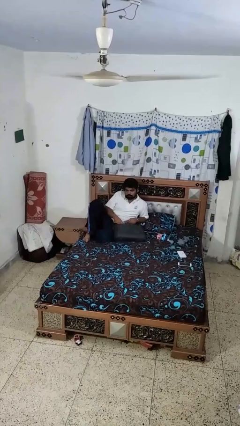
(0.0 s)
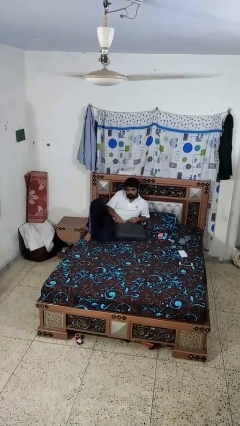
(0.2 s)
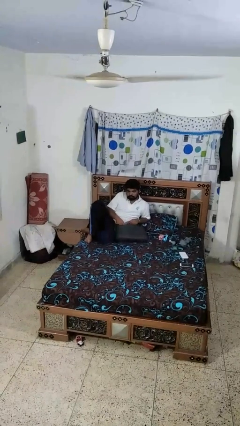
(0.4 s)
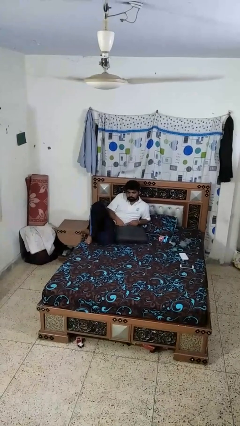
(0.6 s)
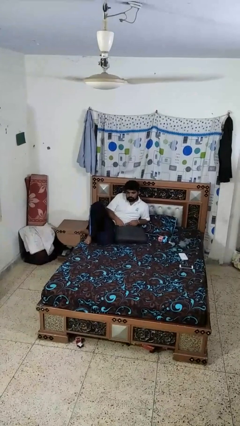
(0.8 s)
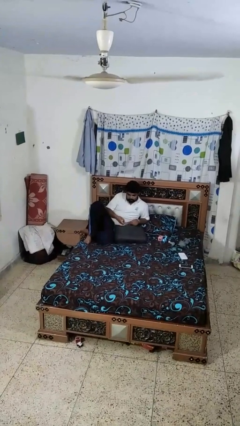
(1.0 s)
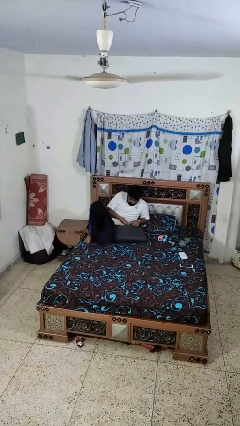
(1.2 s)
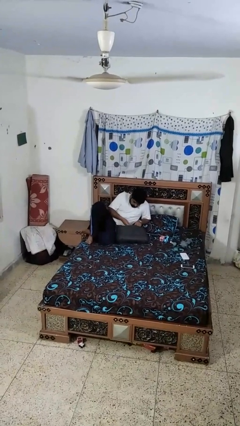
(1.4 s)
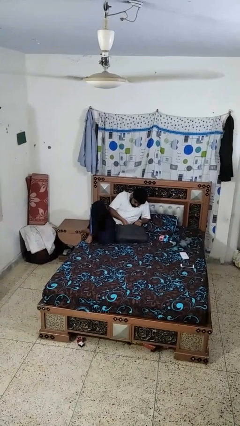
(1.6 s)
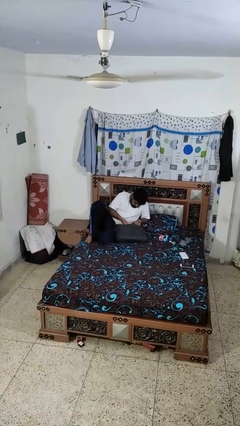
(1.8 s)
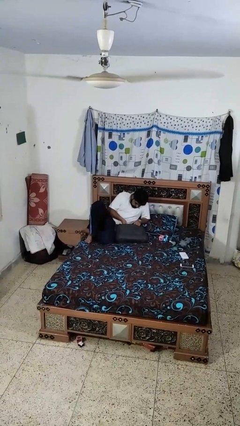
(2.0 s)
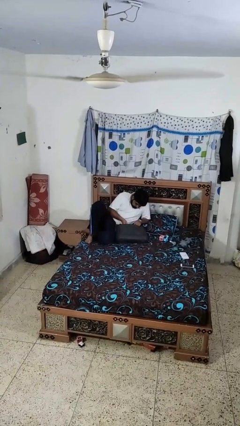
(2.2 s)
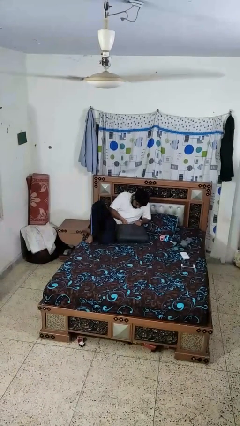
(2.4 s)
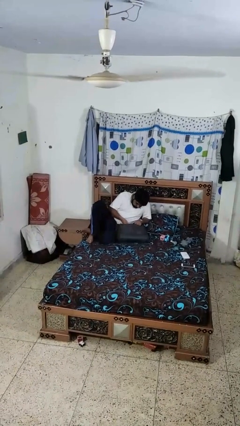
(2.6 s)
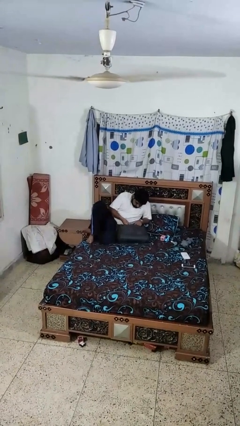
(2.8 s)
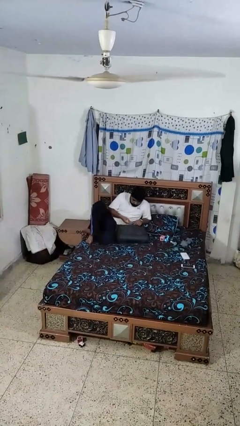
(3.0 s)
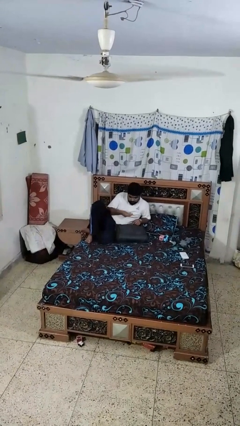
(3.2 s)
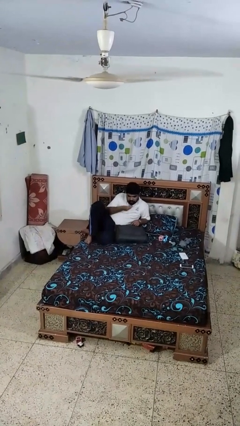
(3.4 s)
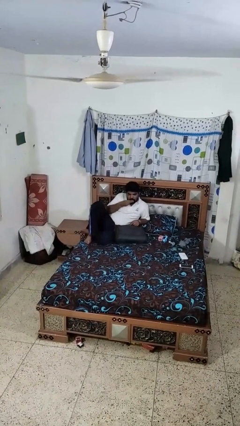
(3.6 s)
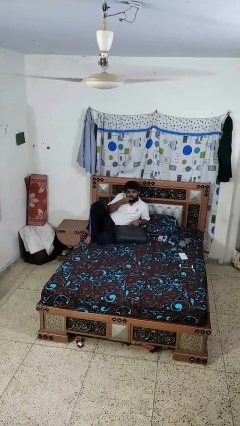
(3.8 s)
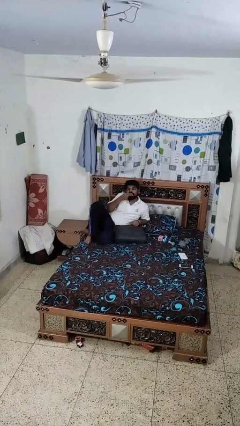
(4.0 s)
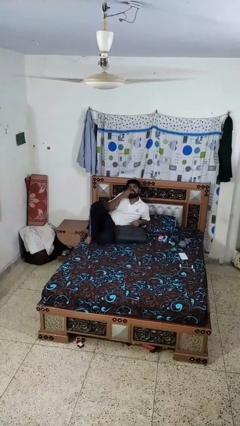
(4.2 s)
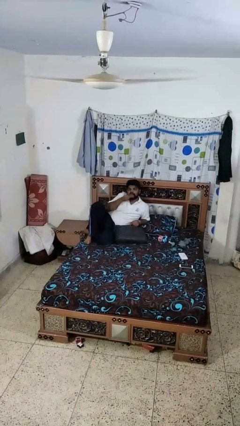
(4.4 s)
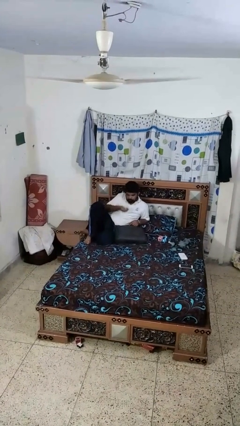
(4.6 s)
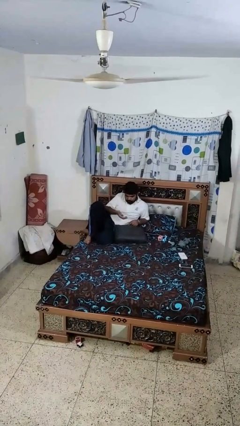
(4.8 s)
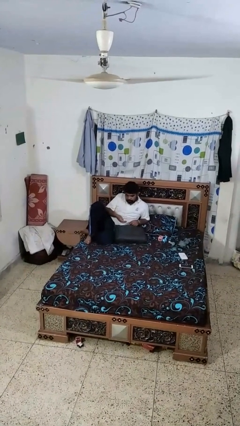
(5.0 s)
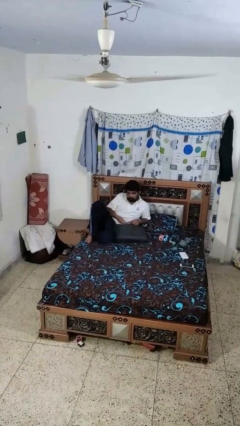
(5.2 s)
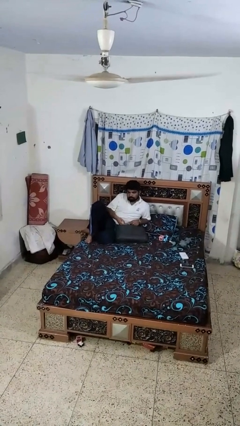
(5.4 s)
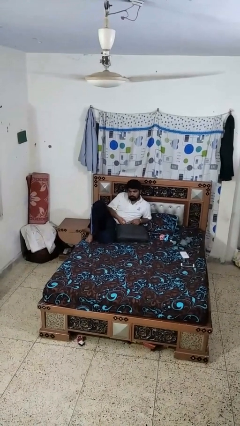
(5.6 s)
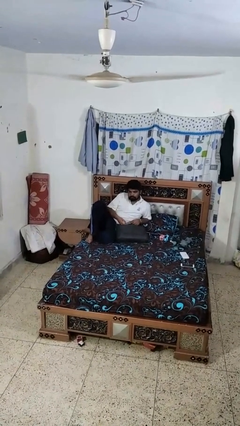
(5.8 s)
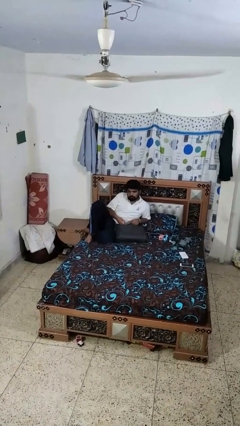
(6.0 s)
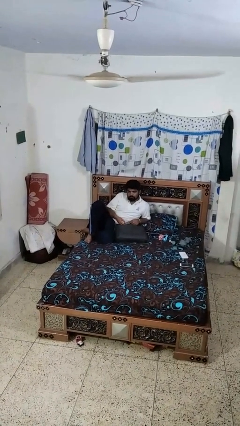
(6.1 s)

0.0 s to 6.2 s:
person eats snack from bag

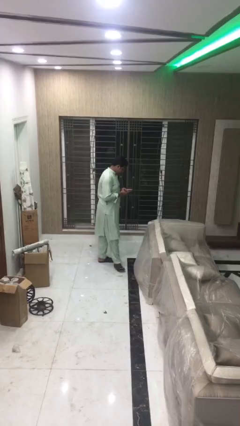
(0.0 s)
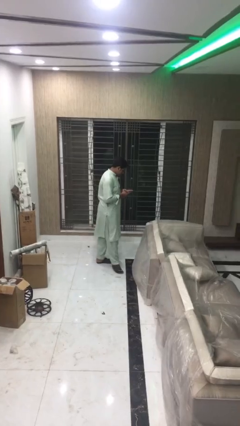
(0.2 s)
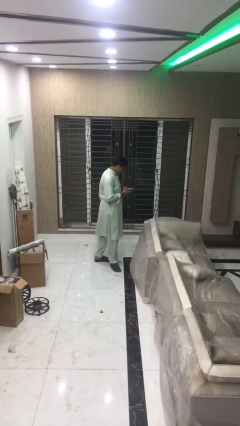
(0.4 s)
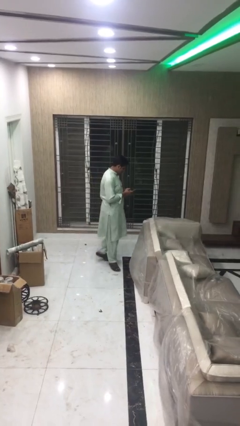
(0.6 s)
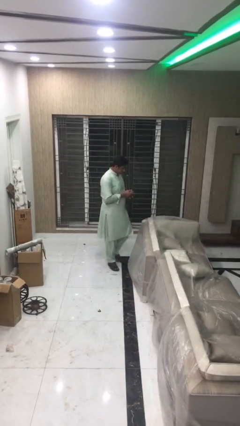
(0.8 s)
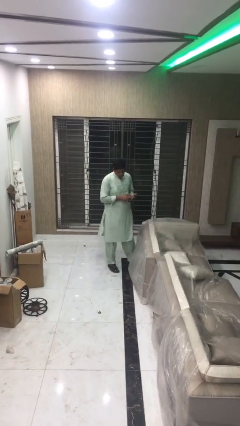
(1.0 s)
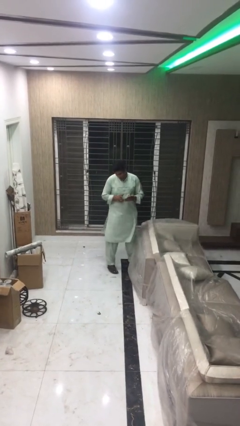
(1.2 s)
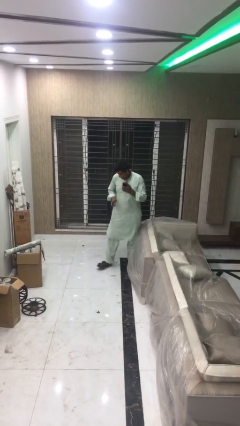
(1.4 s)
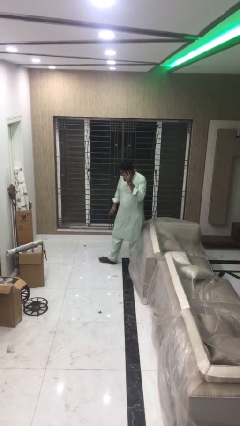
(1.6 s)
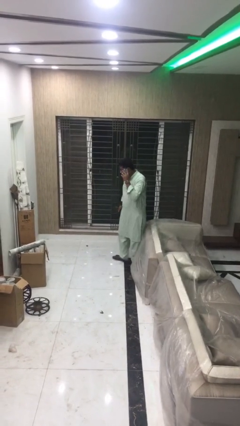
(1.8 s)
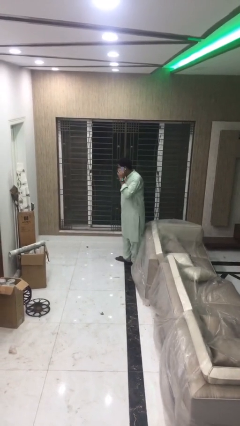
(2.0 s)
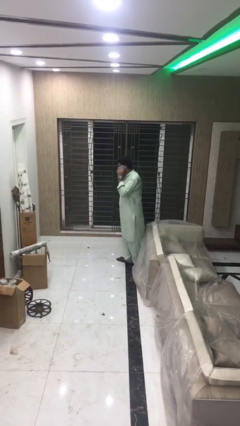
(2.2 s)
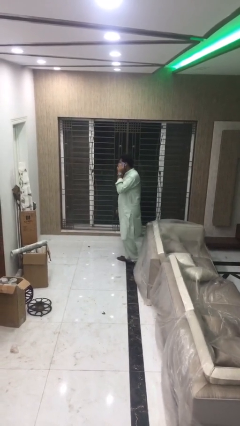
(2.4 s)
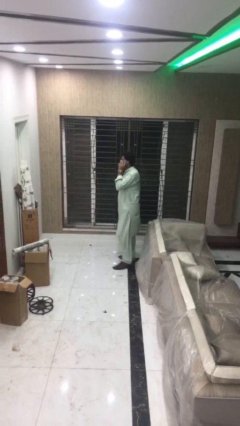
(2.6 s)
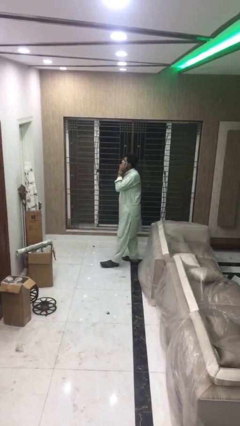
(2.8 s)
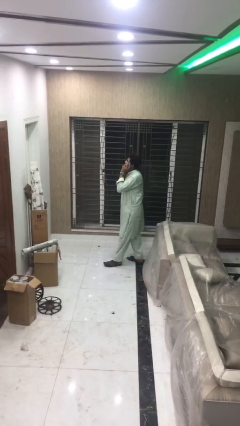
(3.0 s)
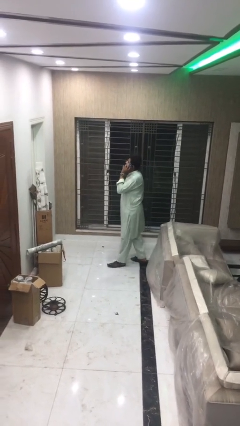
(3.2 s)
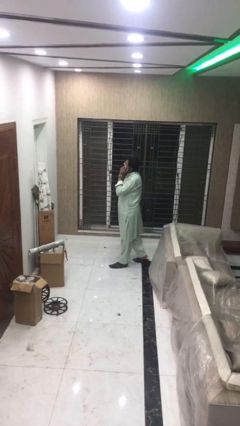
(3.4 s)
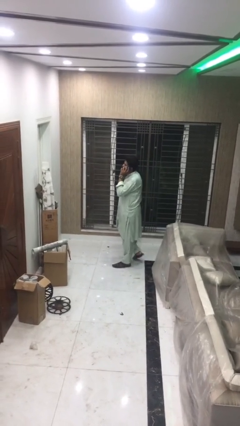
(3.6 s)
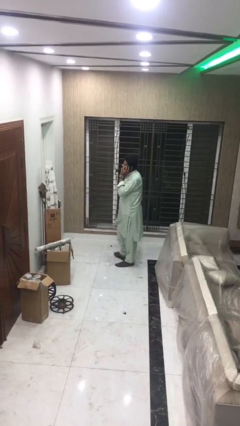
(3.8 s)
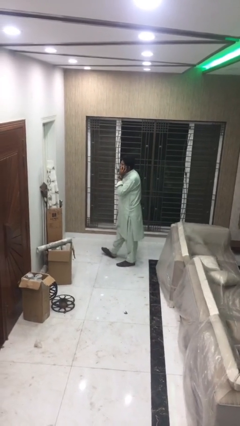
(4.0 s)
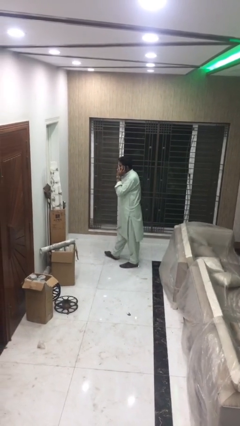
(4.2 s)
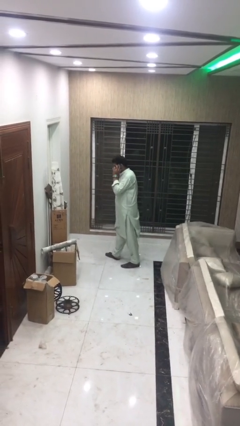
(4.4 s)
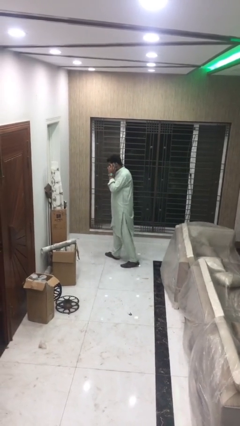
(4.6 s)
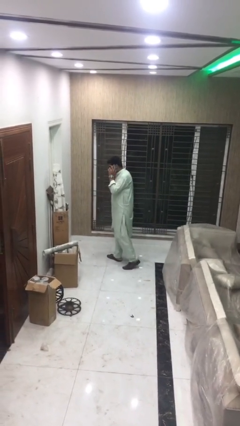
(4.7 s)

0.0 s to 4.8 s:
person talks on phone

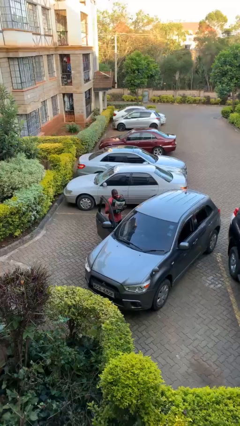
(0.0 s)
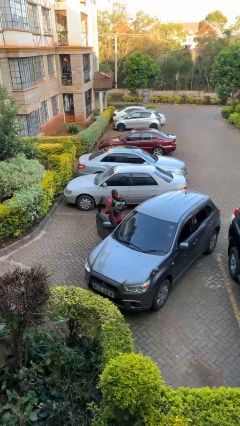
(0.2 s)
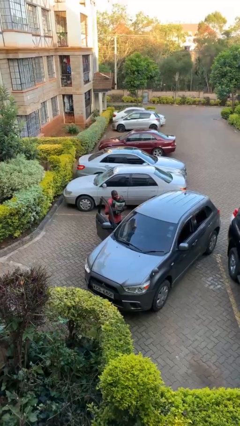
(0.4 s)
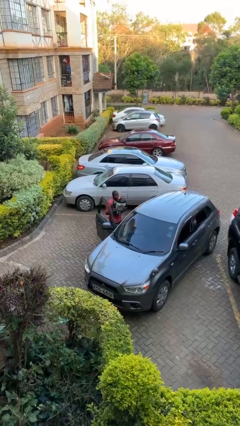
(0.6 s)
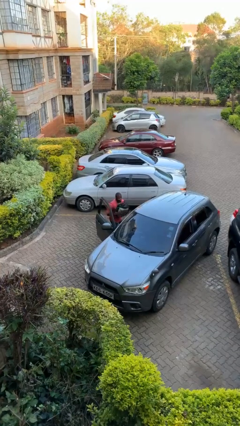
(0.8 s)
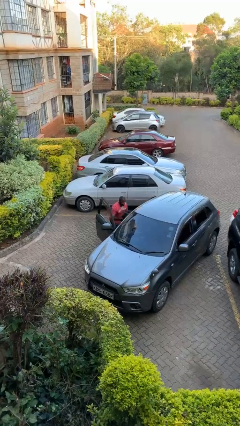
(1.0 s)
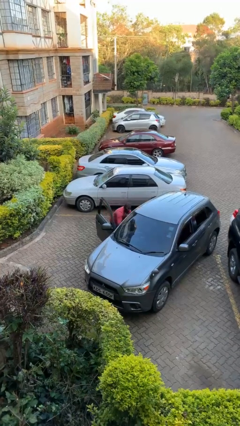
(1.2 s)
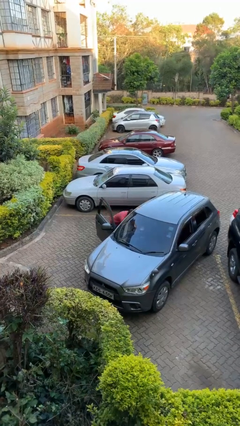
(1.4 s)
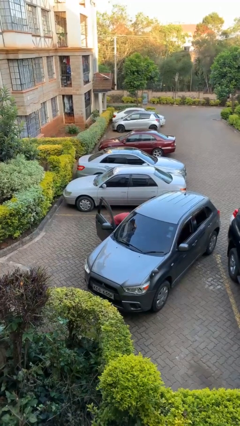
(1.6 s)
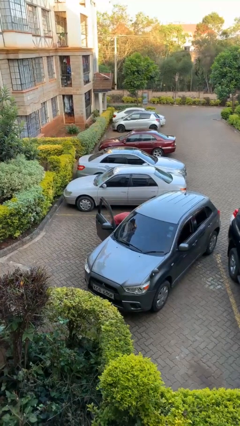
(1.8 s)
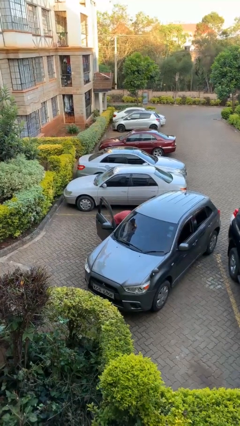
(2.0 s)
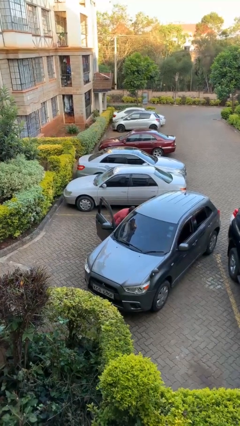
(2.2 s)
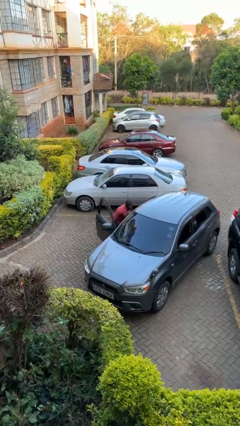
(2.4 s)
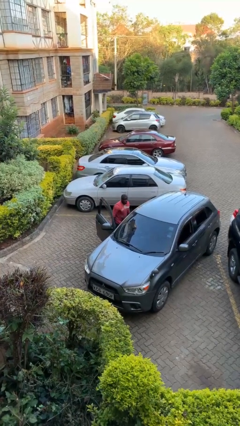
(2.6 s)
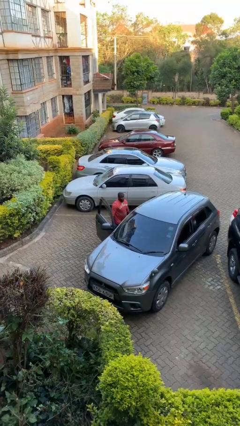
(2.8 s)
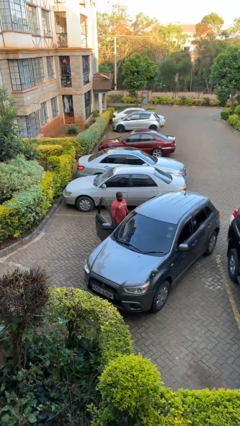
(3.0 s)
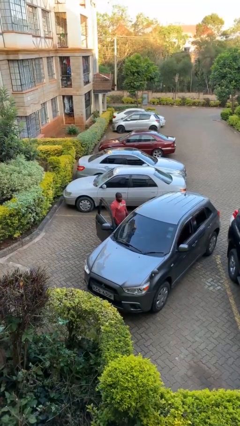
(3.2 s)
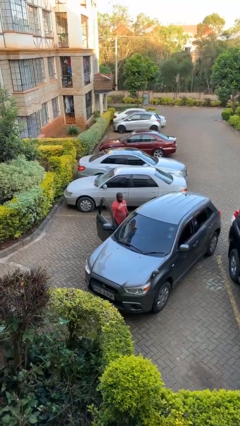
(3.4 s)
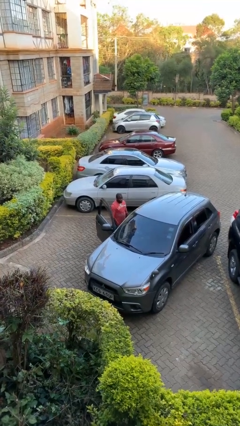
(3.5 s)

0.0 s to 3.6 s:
person loads car

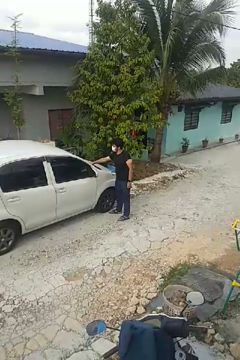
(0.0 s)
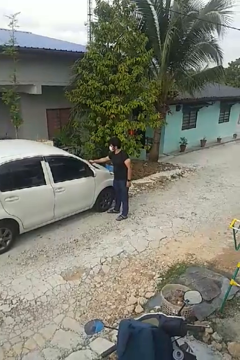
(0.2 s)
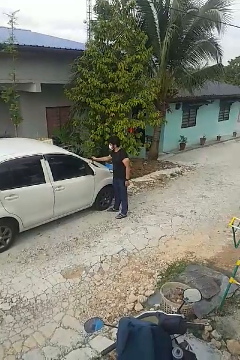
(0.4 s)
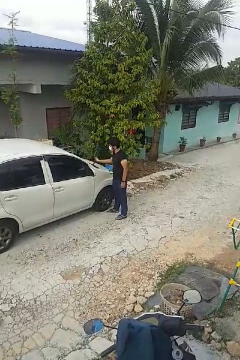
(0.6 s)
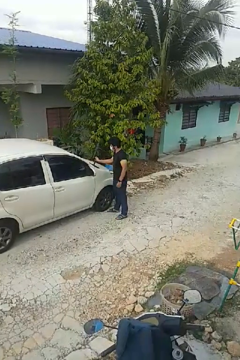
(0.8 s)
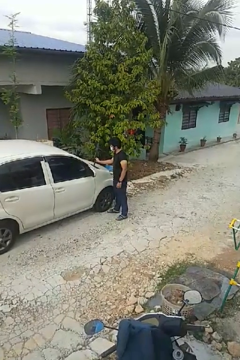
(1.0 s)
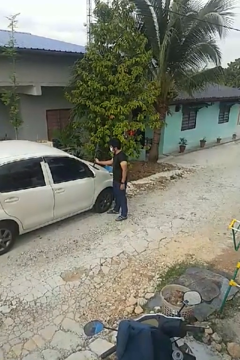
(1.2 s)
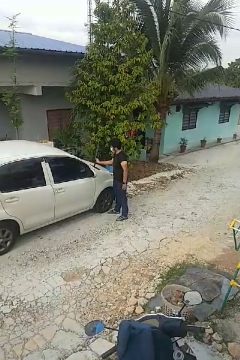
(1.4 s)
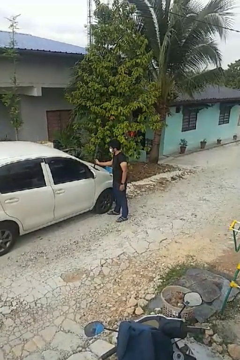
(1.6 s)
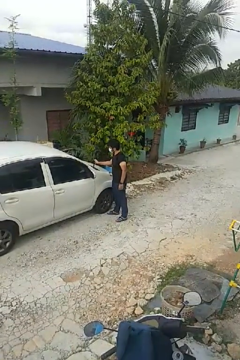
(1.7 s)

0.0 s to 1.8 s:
person flips up car wipers

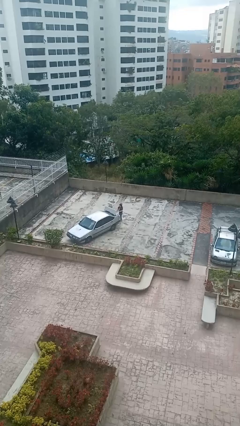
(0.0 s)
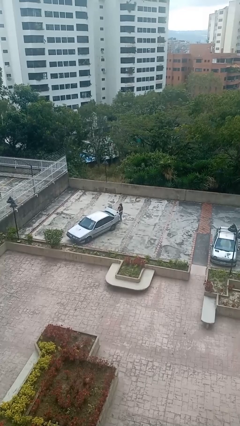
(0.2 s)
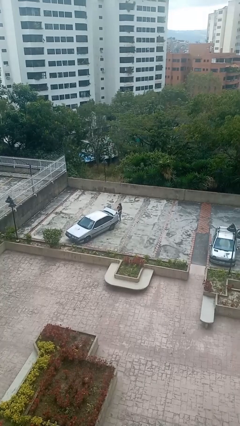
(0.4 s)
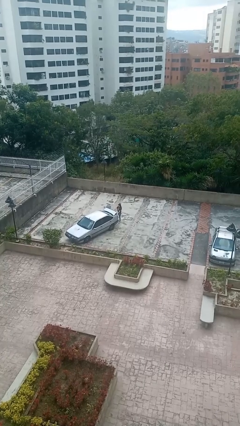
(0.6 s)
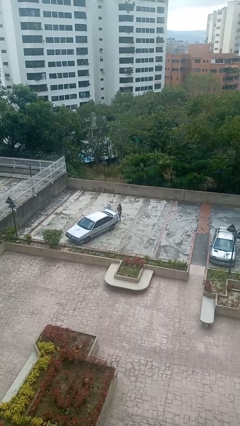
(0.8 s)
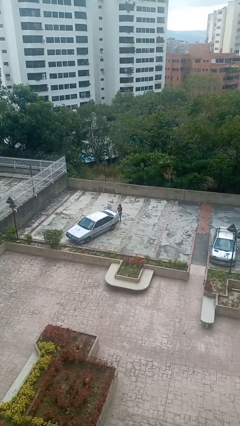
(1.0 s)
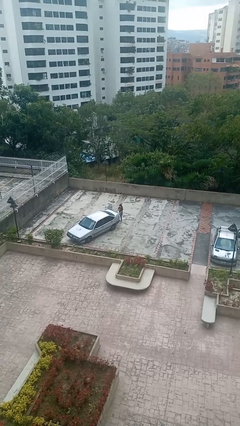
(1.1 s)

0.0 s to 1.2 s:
person closes car trunk

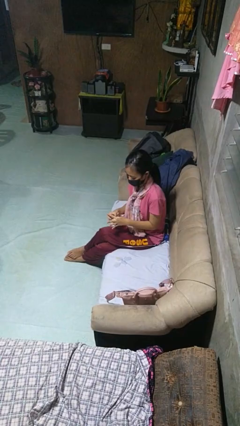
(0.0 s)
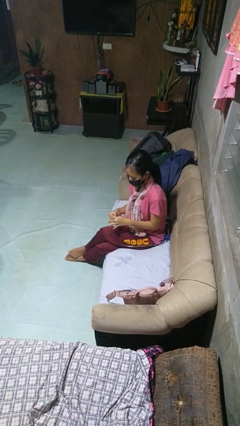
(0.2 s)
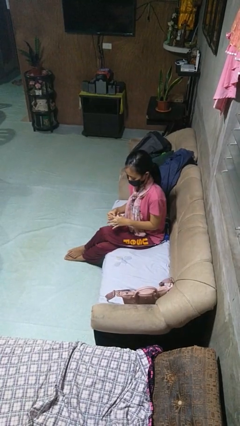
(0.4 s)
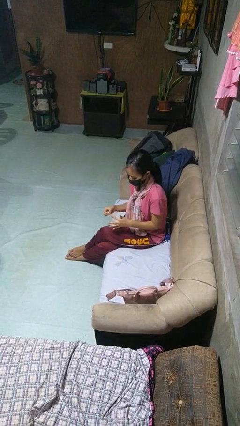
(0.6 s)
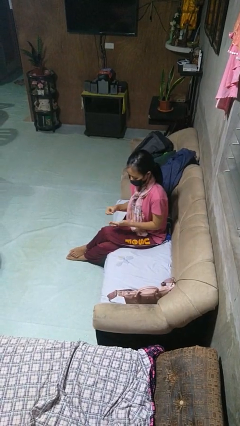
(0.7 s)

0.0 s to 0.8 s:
person takes off ring
